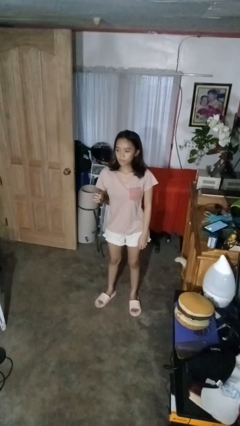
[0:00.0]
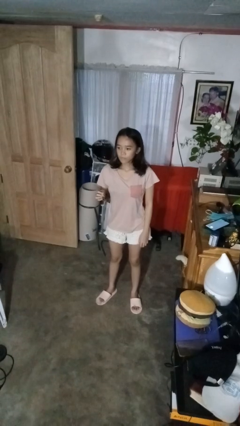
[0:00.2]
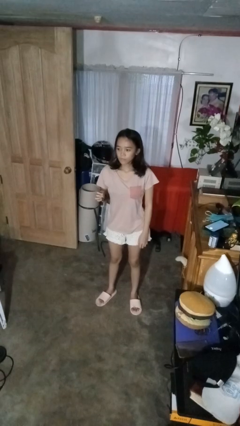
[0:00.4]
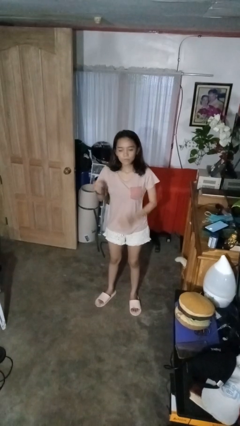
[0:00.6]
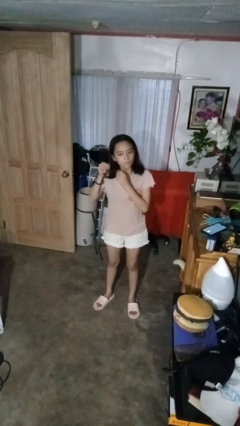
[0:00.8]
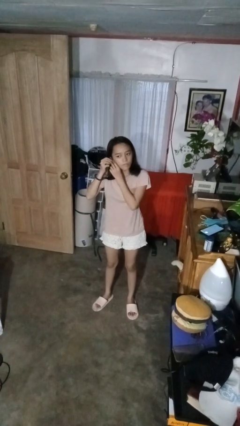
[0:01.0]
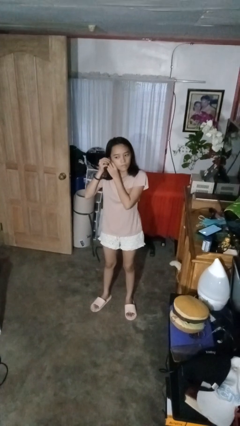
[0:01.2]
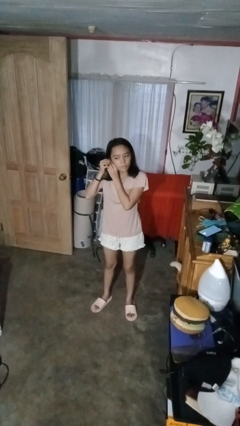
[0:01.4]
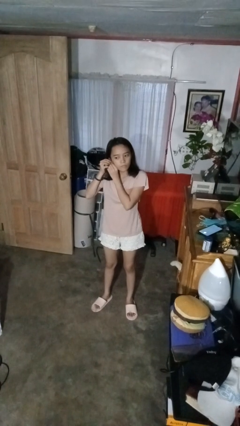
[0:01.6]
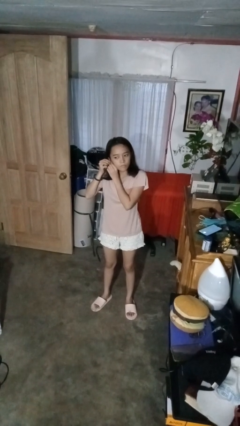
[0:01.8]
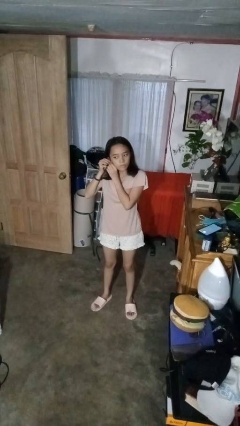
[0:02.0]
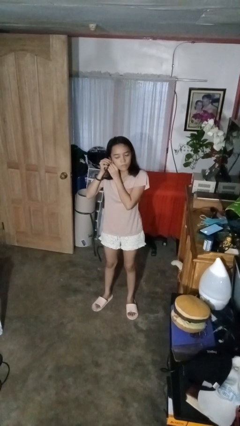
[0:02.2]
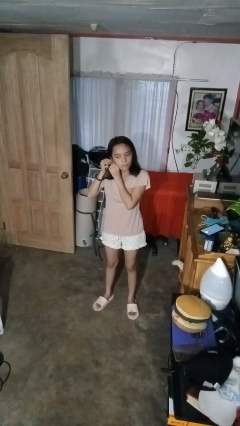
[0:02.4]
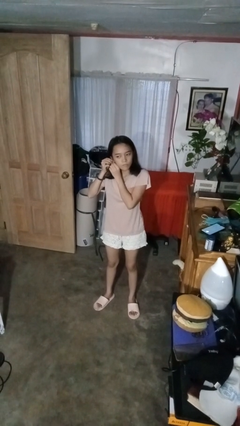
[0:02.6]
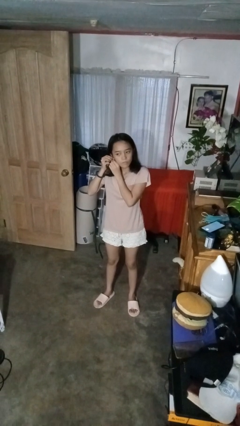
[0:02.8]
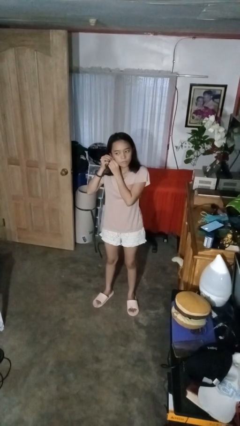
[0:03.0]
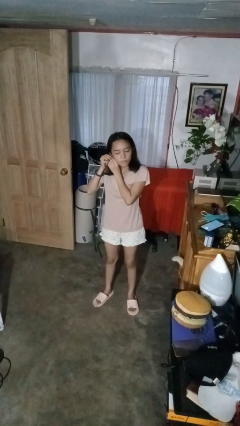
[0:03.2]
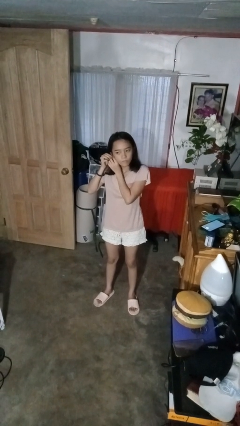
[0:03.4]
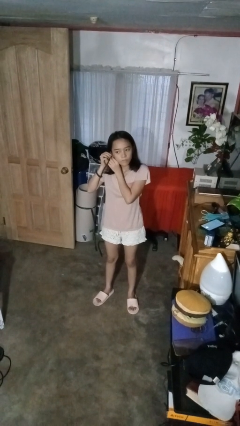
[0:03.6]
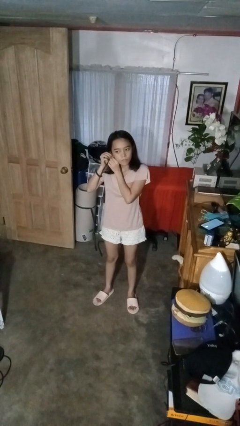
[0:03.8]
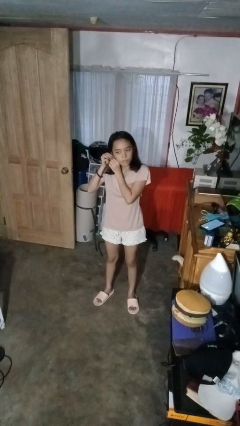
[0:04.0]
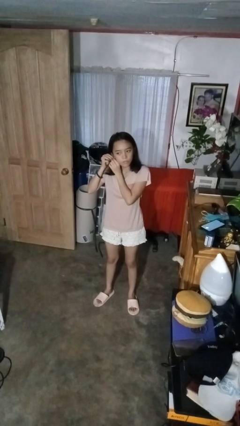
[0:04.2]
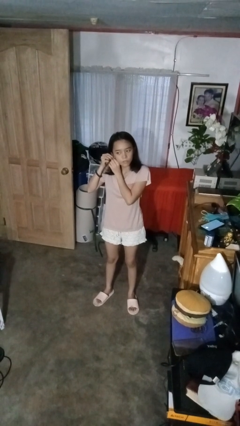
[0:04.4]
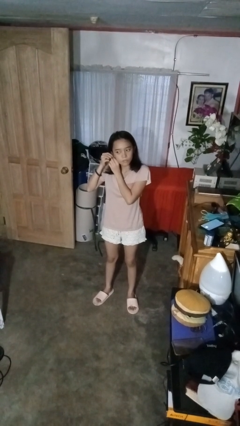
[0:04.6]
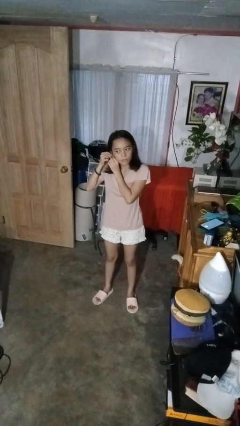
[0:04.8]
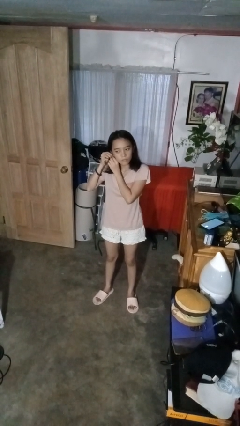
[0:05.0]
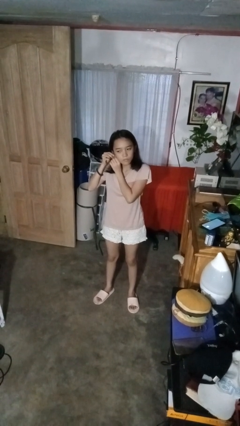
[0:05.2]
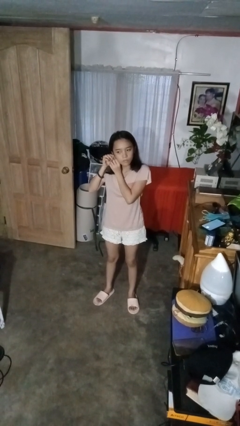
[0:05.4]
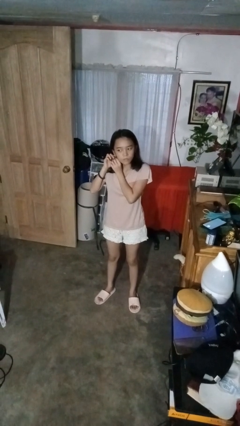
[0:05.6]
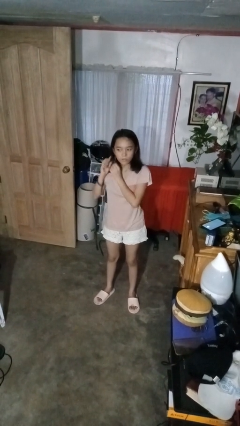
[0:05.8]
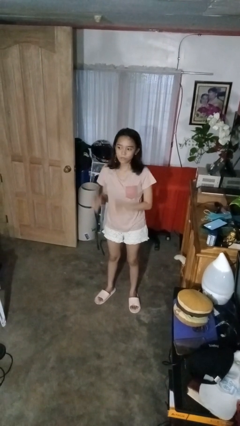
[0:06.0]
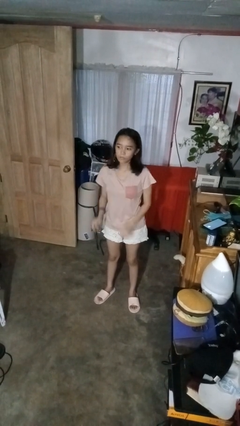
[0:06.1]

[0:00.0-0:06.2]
person puts on earrings

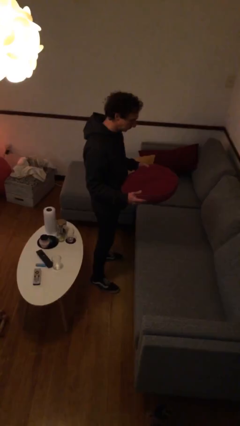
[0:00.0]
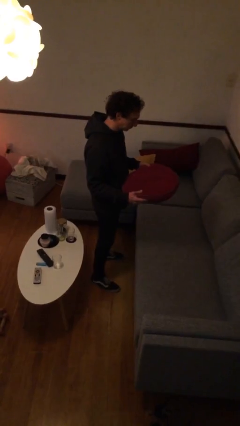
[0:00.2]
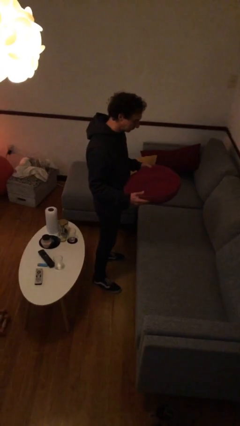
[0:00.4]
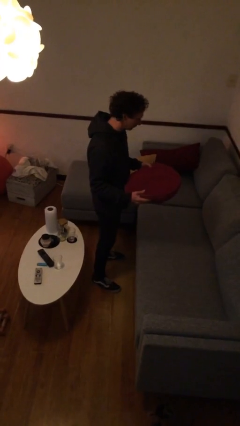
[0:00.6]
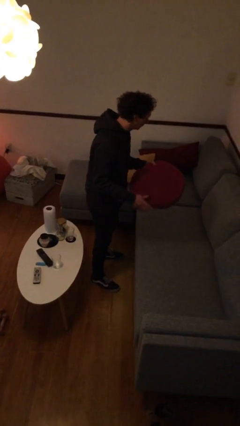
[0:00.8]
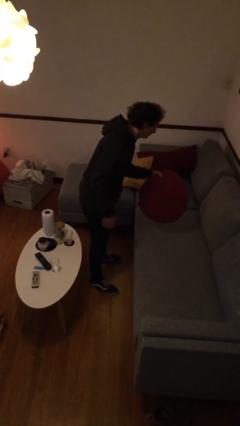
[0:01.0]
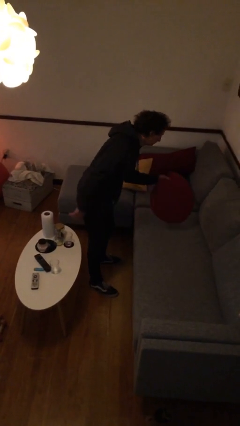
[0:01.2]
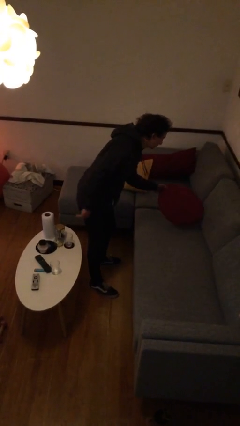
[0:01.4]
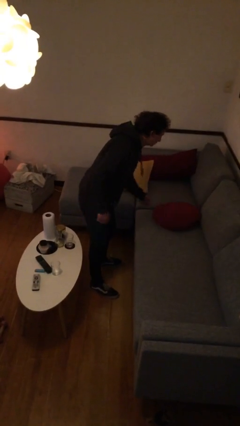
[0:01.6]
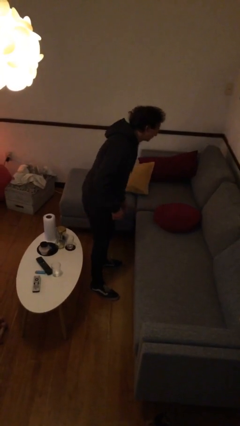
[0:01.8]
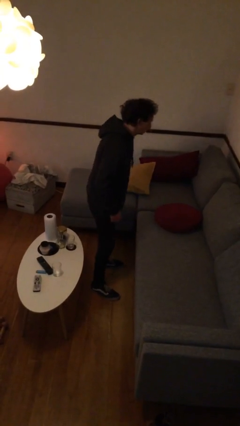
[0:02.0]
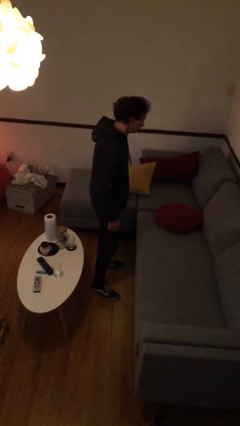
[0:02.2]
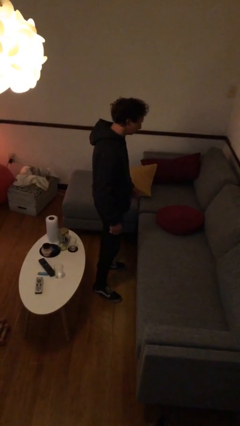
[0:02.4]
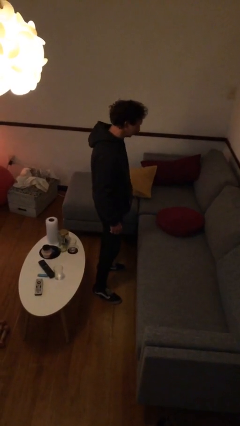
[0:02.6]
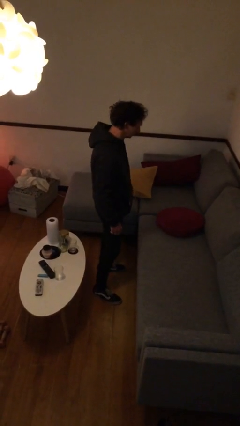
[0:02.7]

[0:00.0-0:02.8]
person puts down object on couch

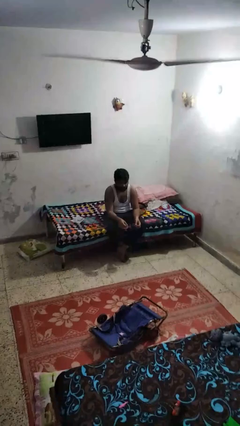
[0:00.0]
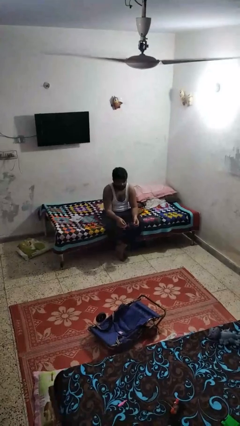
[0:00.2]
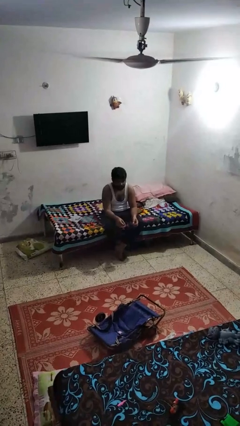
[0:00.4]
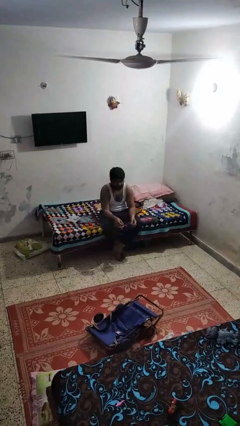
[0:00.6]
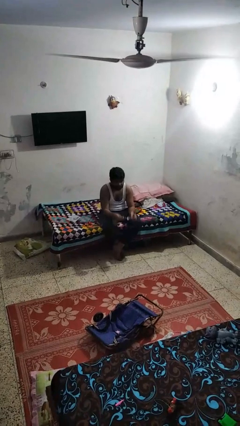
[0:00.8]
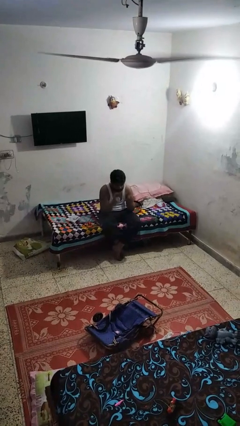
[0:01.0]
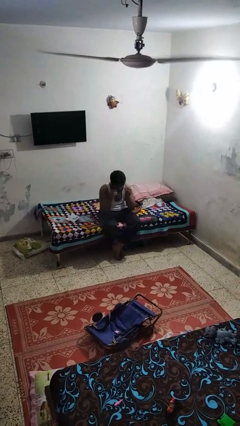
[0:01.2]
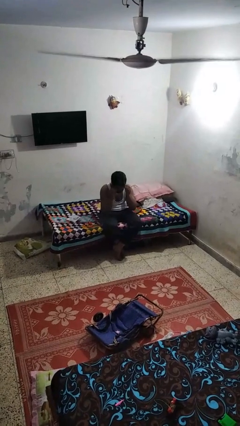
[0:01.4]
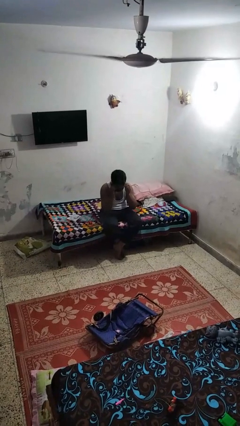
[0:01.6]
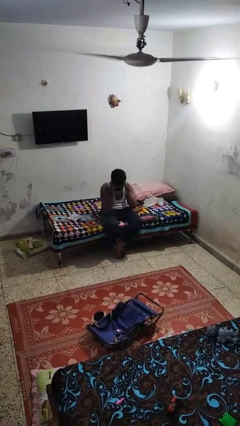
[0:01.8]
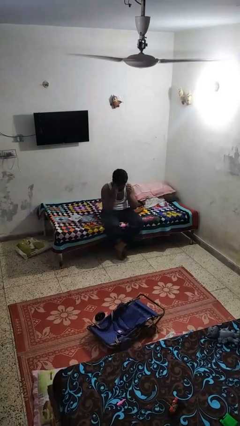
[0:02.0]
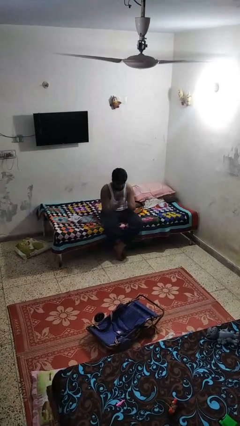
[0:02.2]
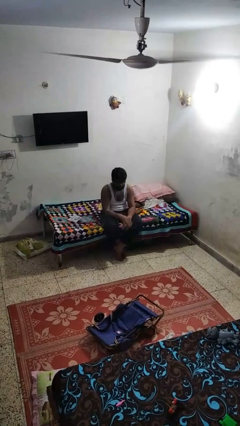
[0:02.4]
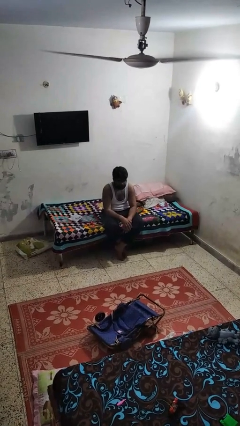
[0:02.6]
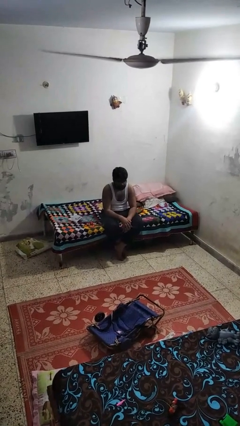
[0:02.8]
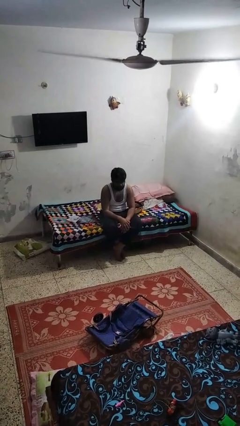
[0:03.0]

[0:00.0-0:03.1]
person puts on glasses

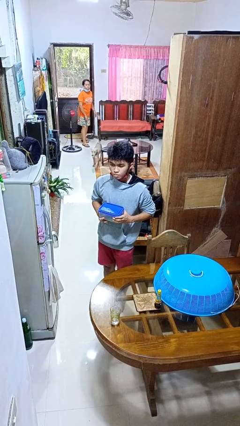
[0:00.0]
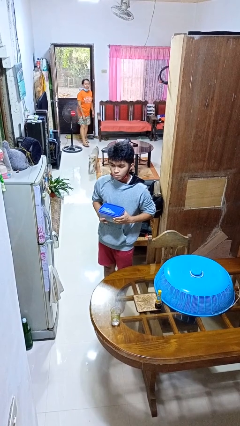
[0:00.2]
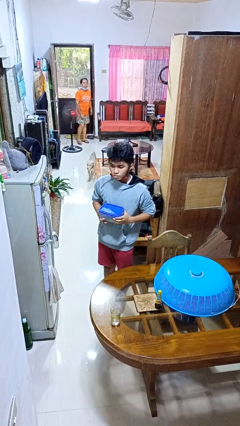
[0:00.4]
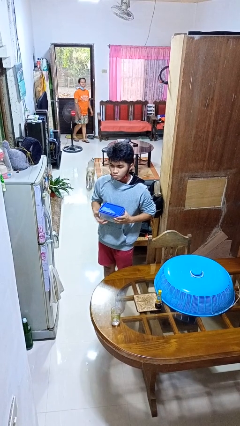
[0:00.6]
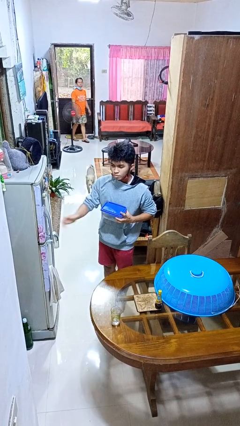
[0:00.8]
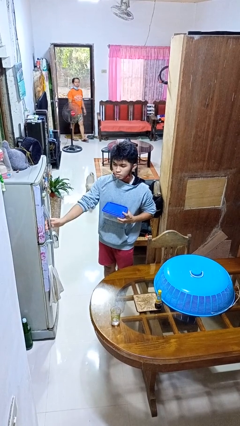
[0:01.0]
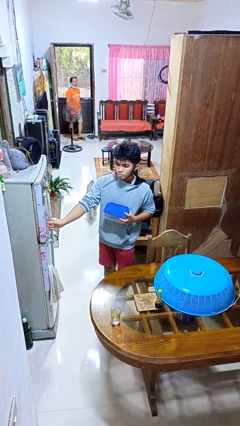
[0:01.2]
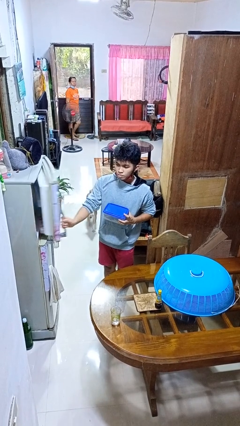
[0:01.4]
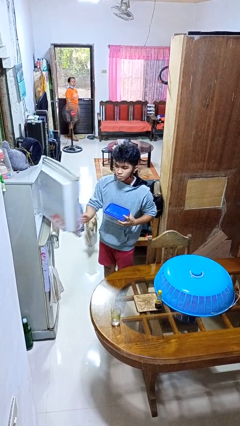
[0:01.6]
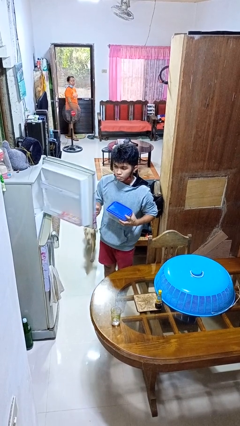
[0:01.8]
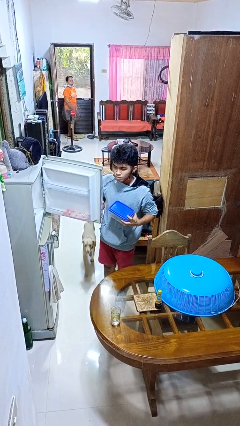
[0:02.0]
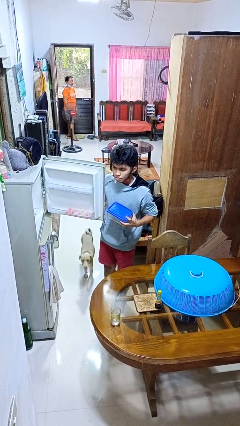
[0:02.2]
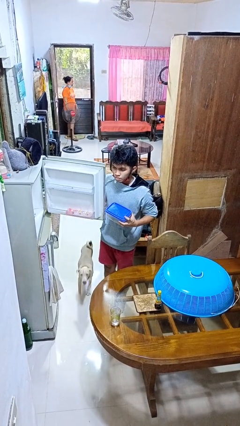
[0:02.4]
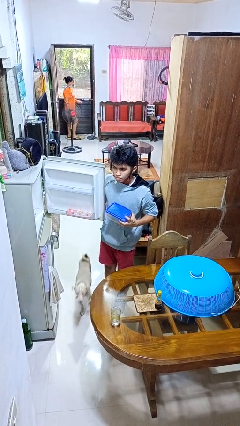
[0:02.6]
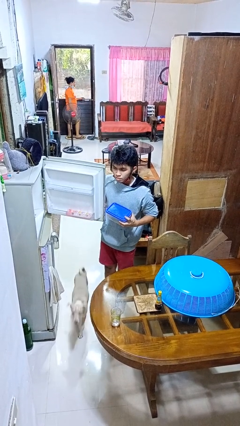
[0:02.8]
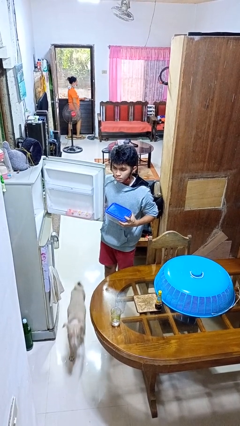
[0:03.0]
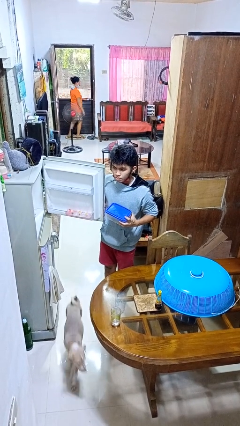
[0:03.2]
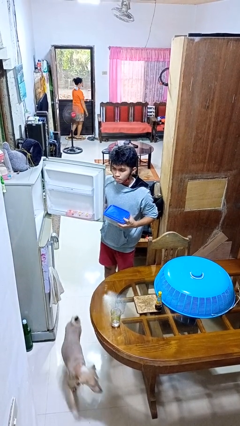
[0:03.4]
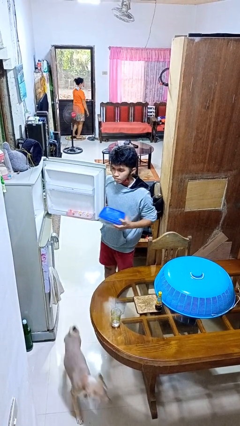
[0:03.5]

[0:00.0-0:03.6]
person opens refrigerator

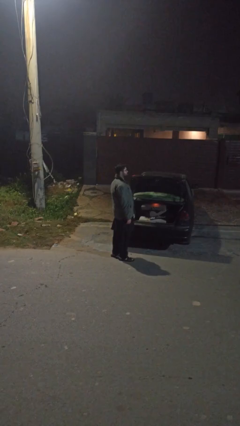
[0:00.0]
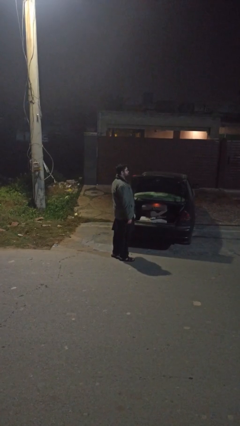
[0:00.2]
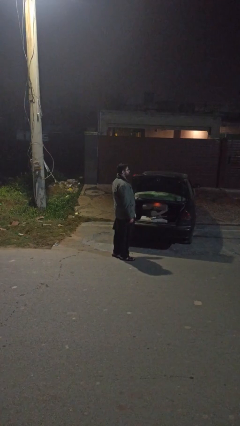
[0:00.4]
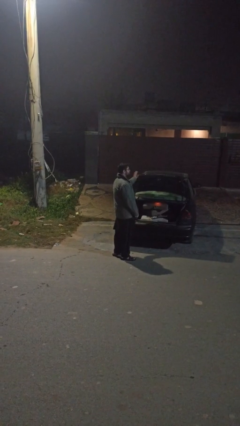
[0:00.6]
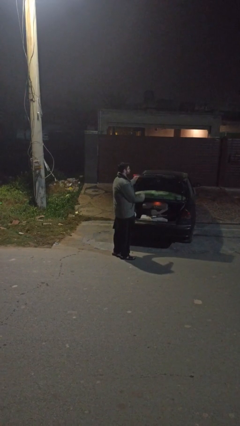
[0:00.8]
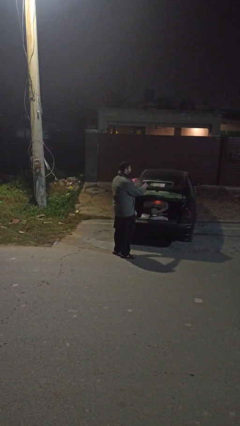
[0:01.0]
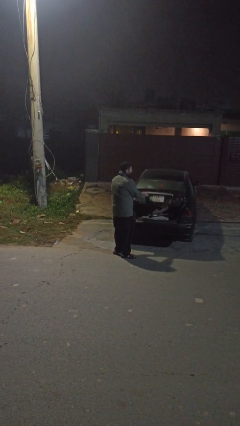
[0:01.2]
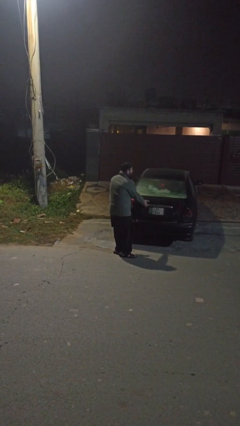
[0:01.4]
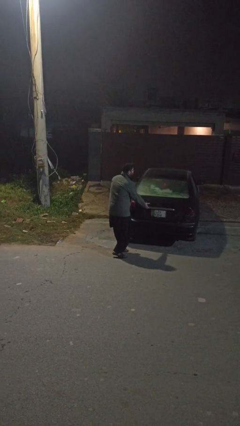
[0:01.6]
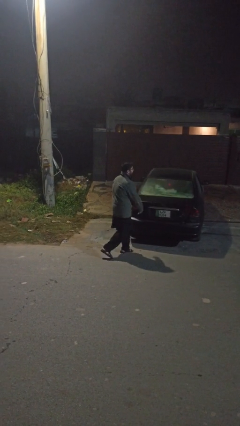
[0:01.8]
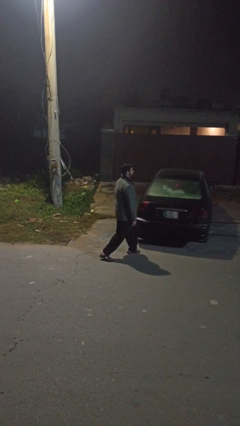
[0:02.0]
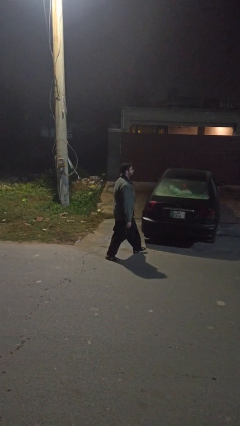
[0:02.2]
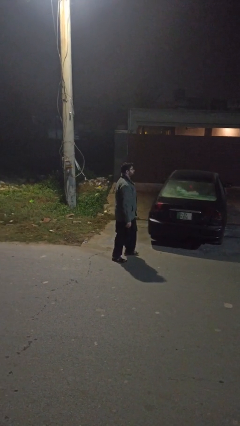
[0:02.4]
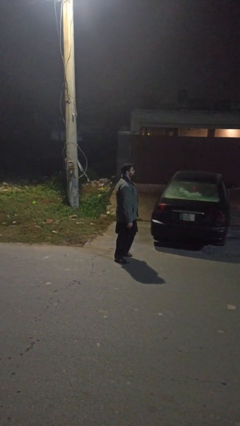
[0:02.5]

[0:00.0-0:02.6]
person closes car trunk

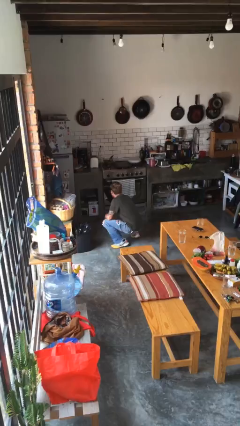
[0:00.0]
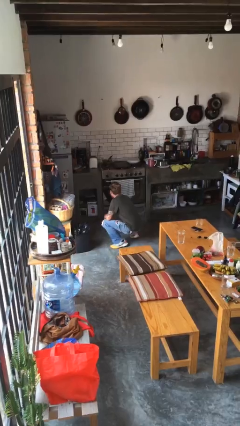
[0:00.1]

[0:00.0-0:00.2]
person stands up
